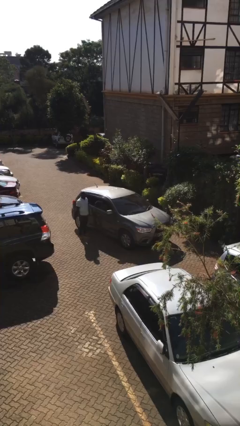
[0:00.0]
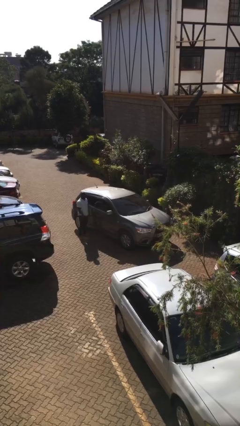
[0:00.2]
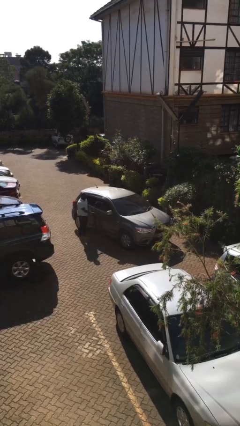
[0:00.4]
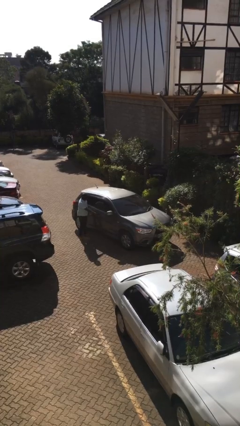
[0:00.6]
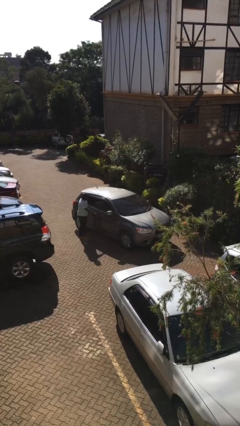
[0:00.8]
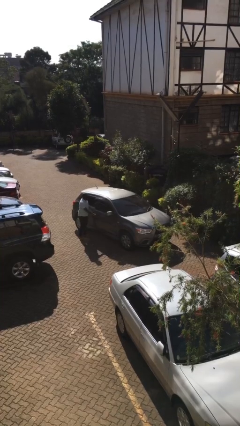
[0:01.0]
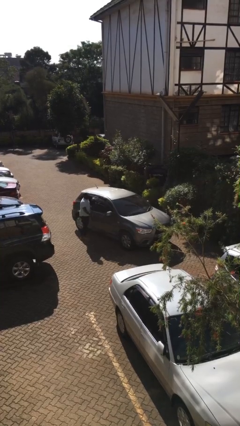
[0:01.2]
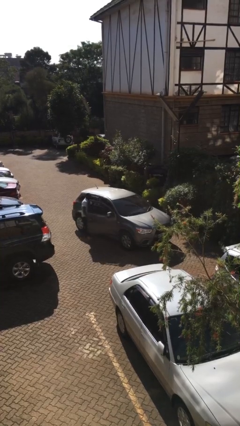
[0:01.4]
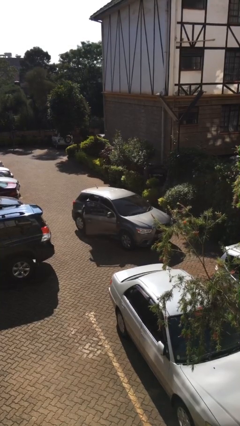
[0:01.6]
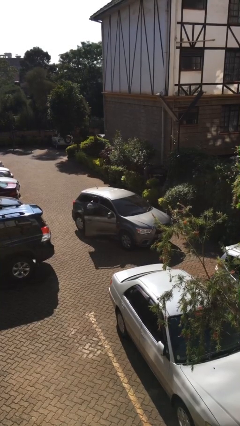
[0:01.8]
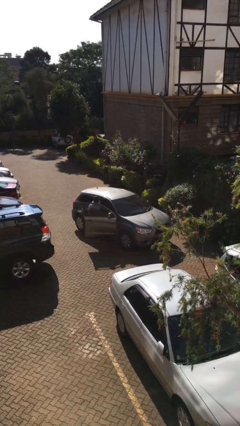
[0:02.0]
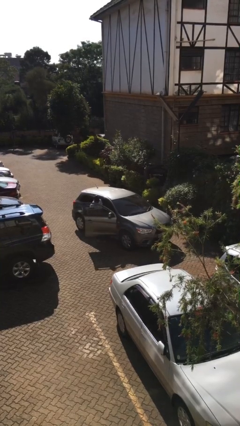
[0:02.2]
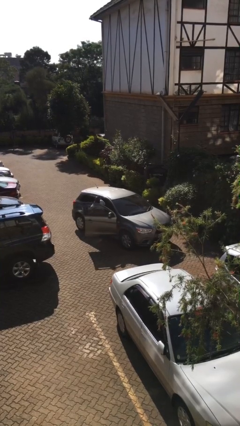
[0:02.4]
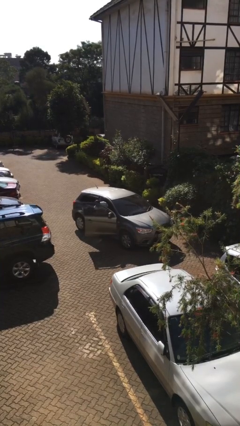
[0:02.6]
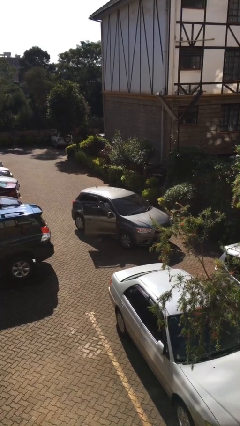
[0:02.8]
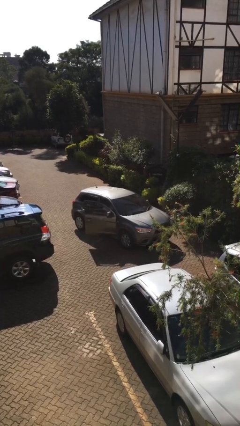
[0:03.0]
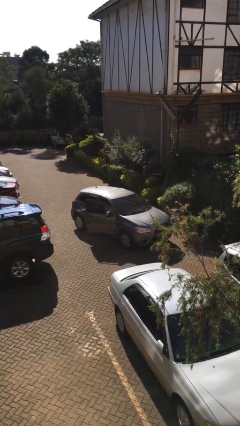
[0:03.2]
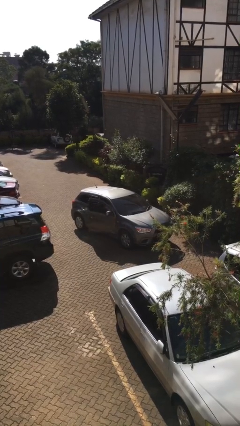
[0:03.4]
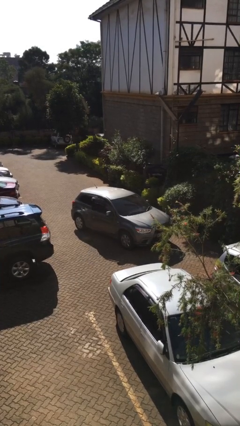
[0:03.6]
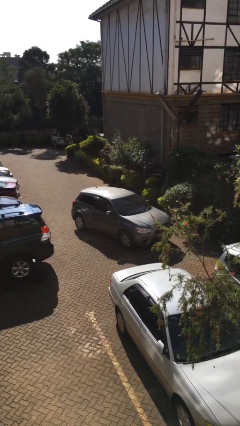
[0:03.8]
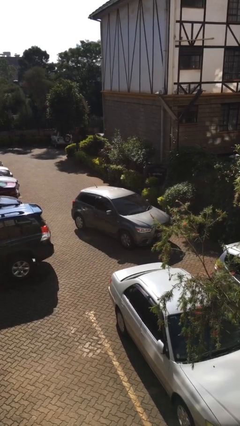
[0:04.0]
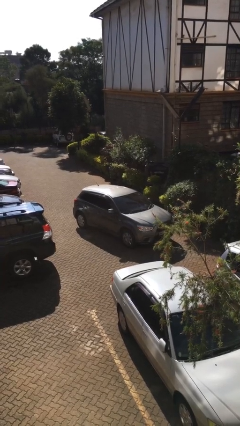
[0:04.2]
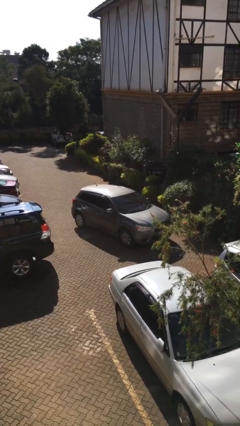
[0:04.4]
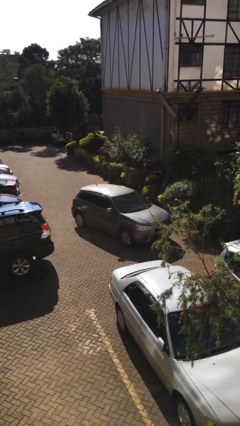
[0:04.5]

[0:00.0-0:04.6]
car picks up person

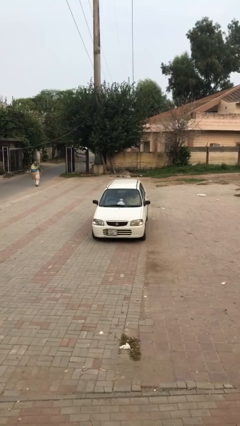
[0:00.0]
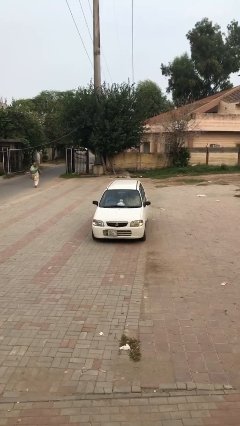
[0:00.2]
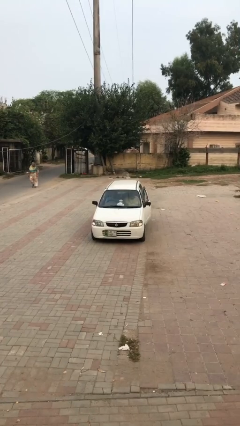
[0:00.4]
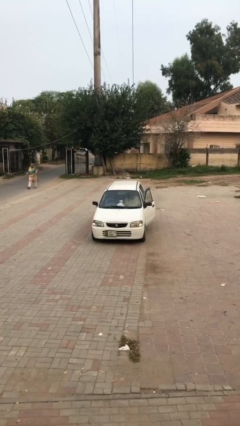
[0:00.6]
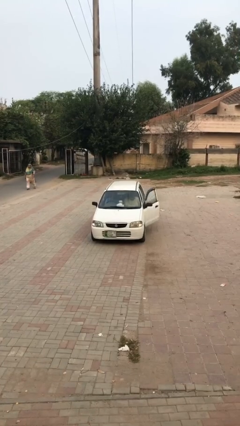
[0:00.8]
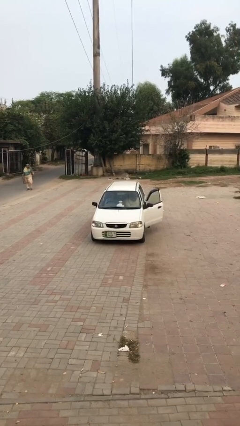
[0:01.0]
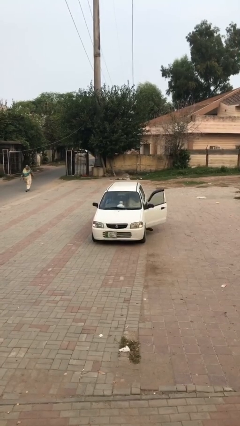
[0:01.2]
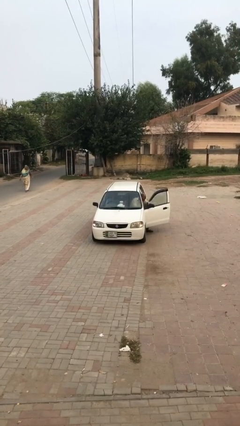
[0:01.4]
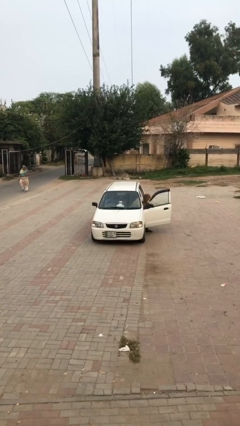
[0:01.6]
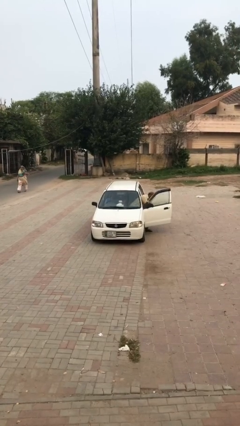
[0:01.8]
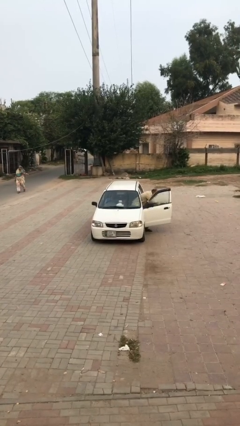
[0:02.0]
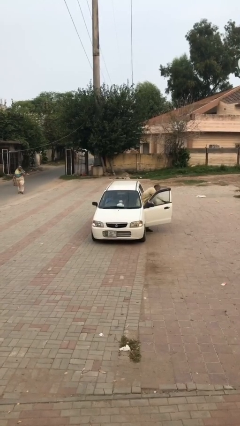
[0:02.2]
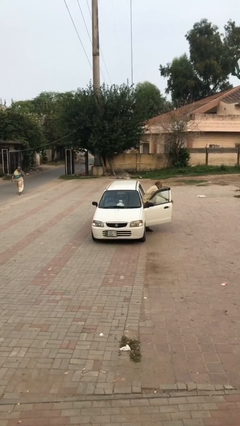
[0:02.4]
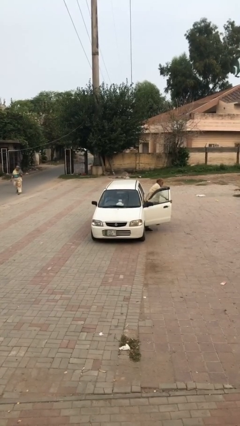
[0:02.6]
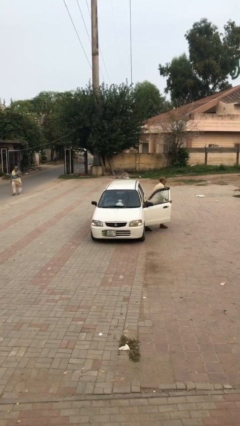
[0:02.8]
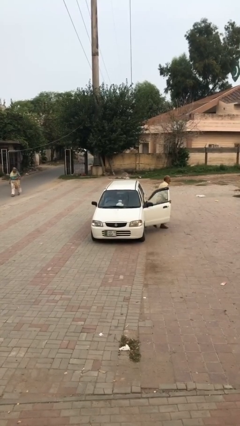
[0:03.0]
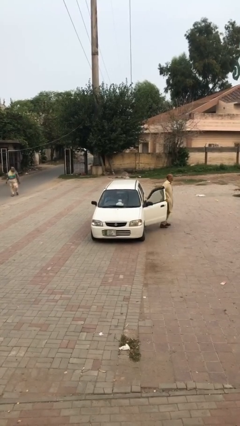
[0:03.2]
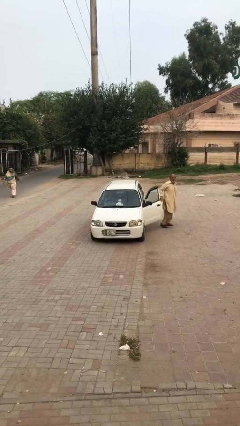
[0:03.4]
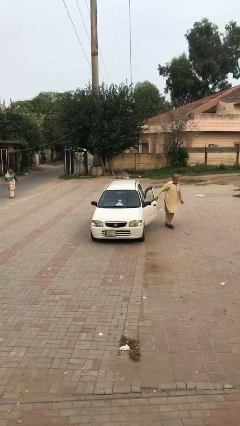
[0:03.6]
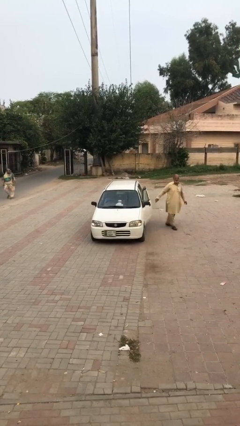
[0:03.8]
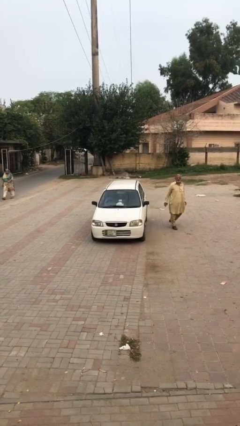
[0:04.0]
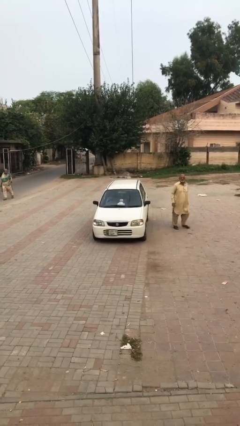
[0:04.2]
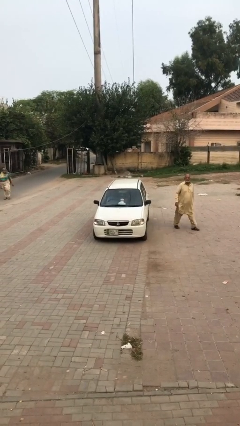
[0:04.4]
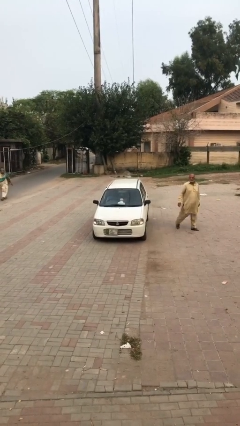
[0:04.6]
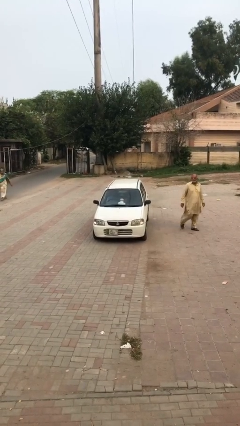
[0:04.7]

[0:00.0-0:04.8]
car drops off person

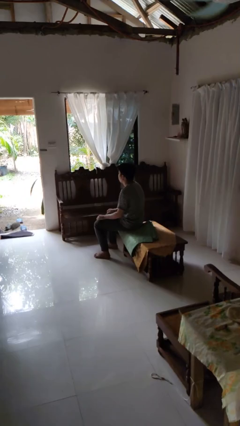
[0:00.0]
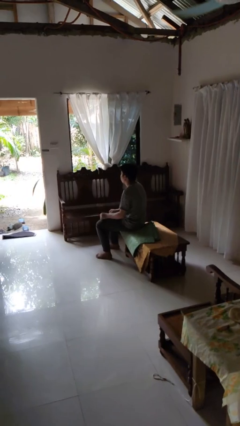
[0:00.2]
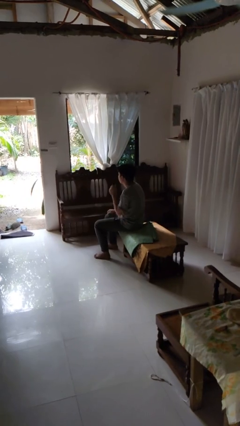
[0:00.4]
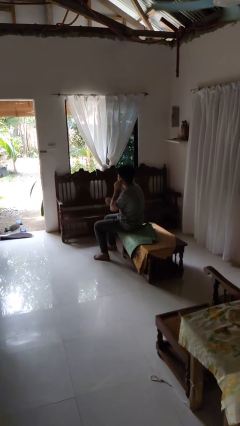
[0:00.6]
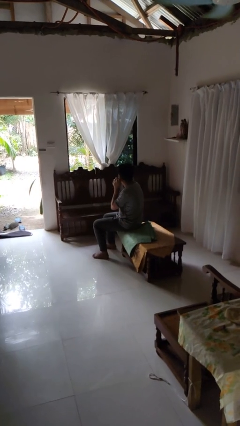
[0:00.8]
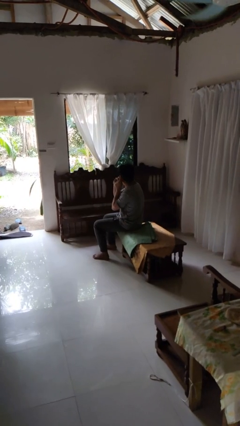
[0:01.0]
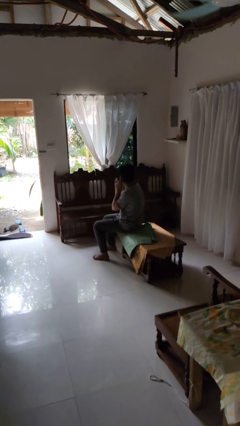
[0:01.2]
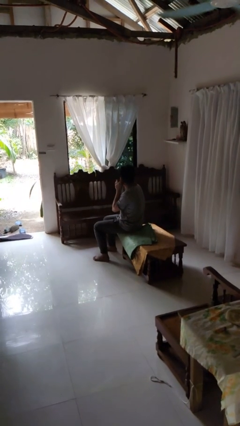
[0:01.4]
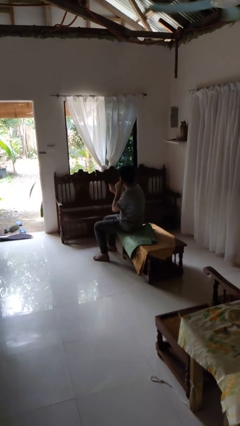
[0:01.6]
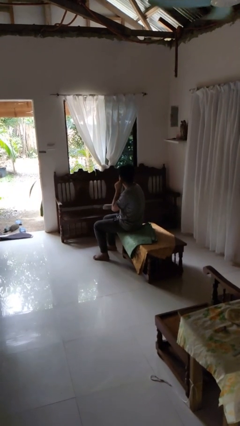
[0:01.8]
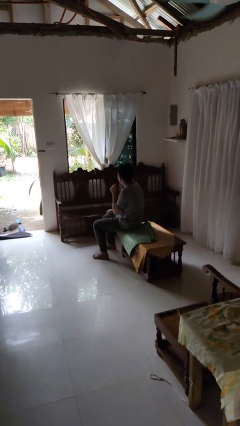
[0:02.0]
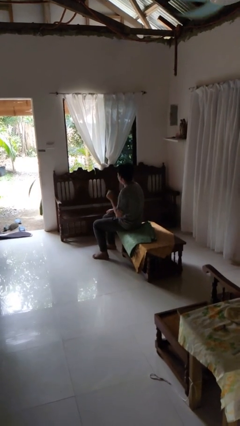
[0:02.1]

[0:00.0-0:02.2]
person takes off earrings

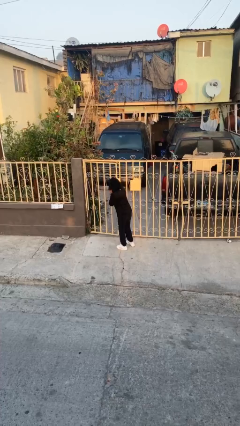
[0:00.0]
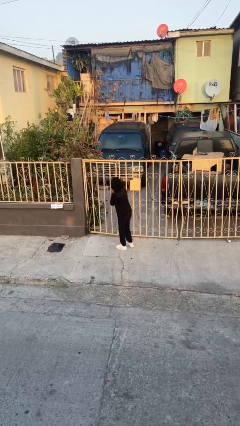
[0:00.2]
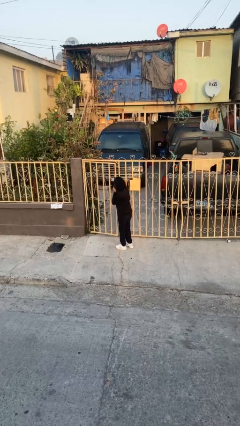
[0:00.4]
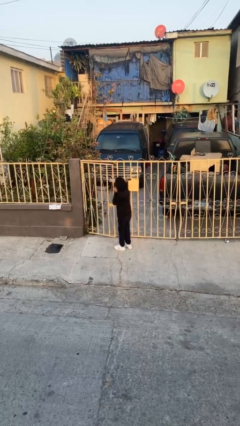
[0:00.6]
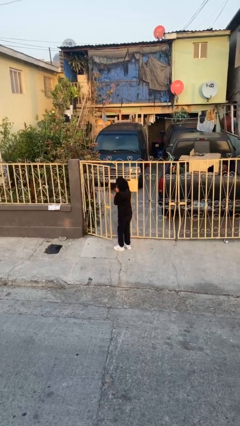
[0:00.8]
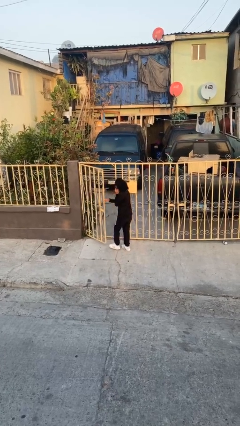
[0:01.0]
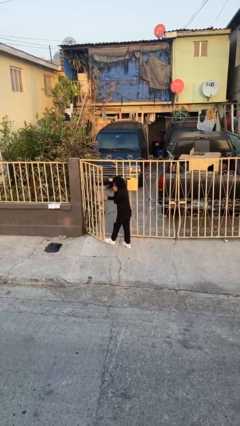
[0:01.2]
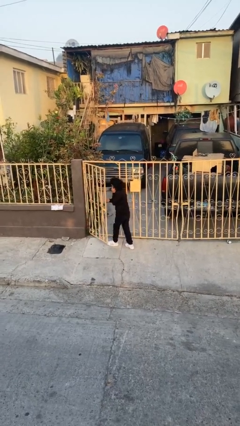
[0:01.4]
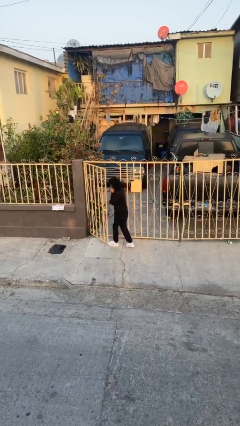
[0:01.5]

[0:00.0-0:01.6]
person opens facility door

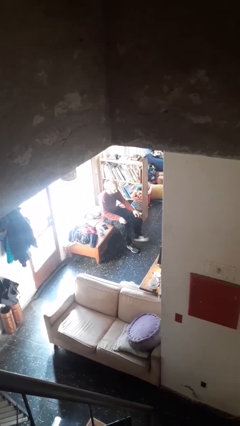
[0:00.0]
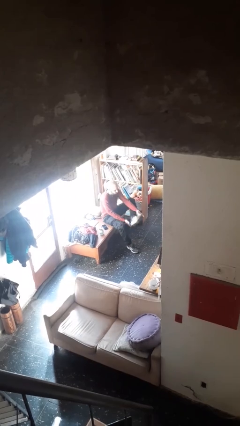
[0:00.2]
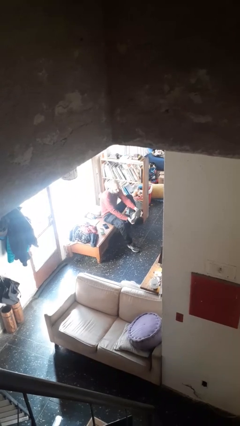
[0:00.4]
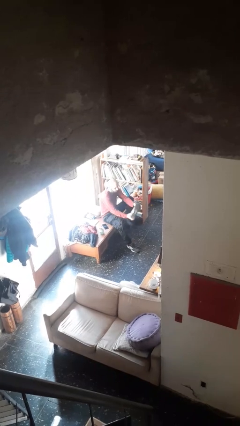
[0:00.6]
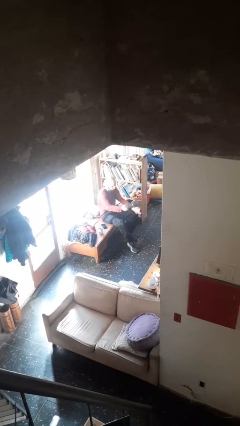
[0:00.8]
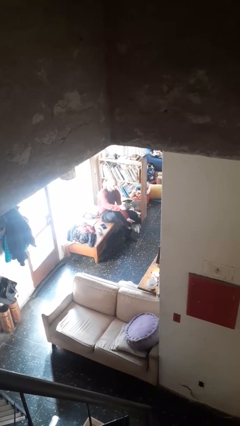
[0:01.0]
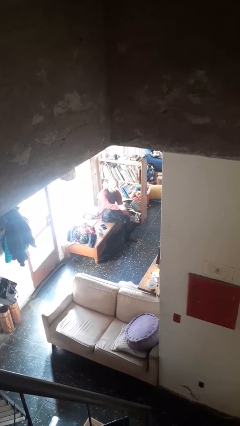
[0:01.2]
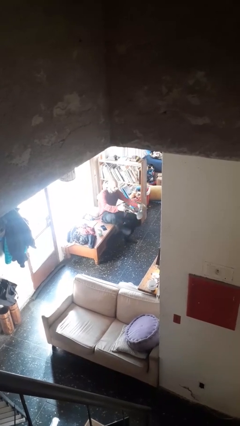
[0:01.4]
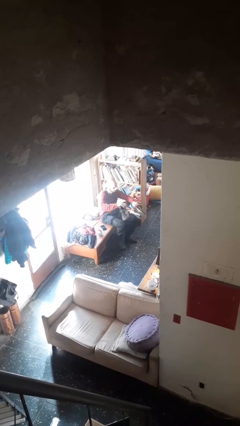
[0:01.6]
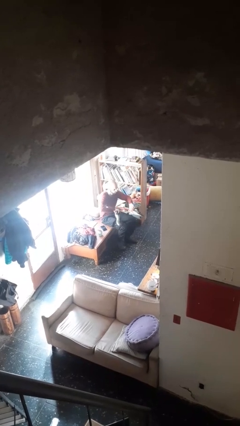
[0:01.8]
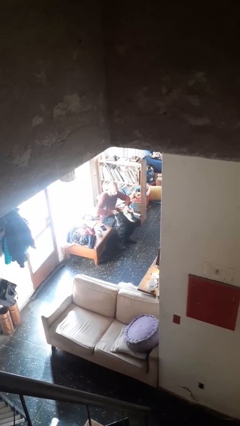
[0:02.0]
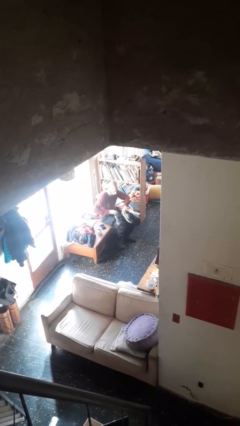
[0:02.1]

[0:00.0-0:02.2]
person takes off shoes

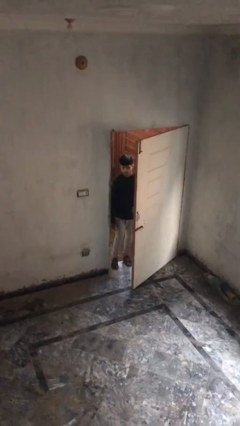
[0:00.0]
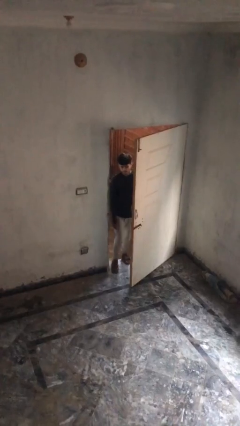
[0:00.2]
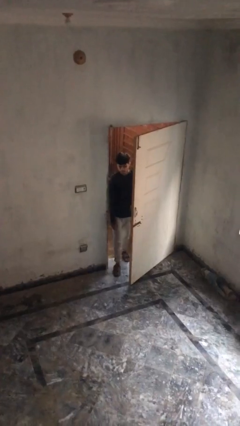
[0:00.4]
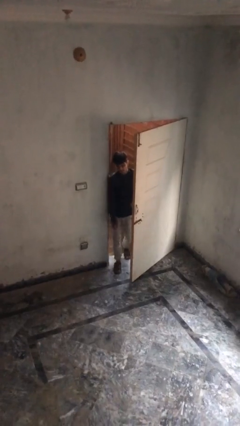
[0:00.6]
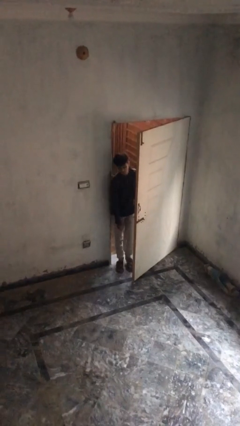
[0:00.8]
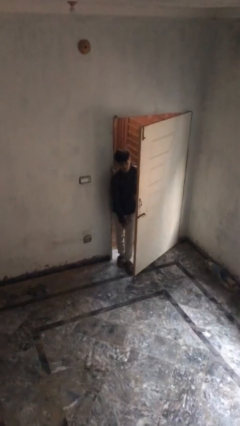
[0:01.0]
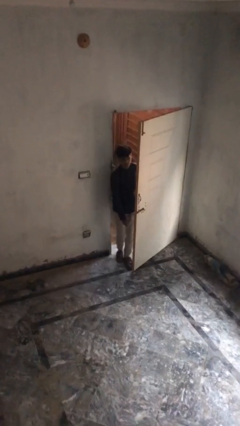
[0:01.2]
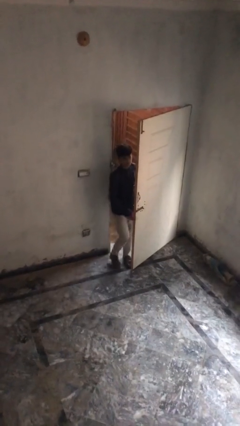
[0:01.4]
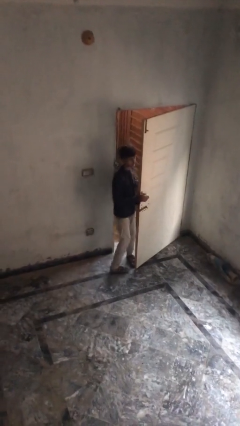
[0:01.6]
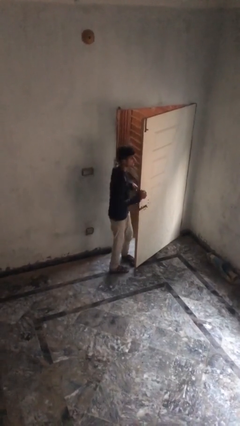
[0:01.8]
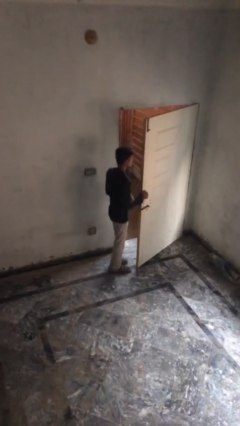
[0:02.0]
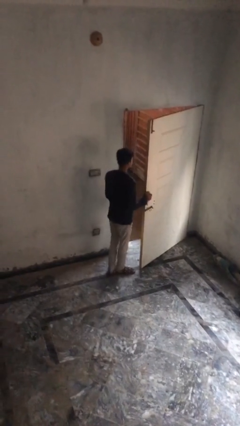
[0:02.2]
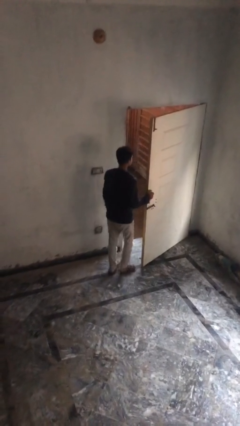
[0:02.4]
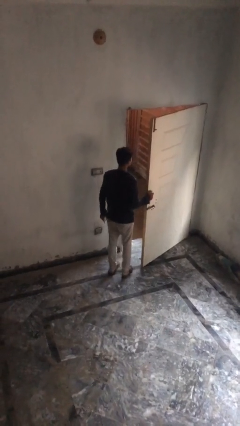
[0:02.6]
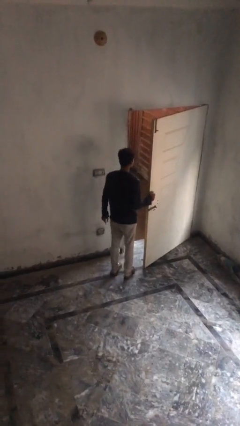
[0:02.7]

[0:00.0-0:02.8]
person enters scene through structure
